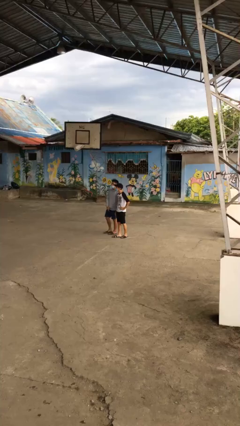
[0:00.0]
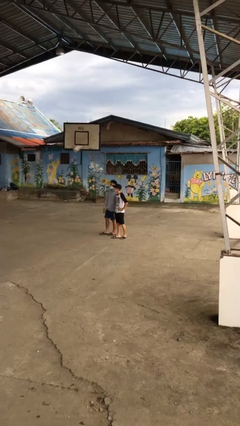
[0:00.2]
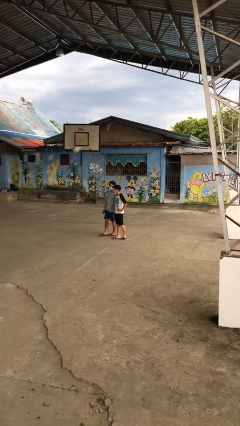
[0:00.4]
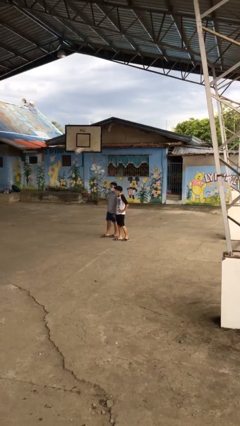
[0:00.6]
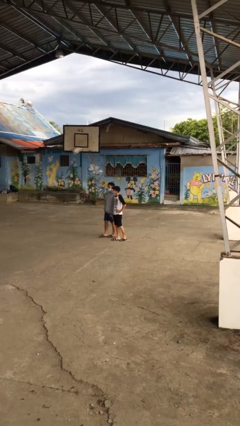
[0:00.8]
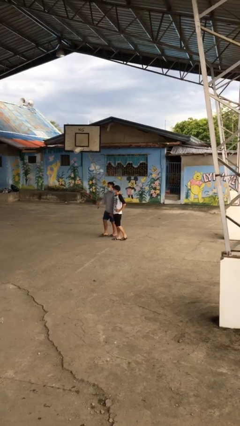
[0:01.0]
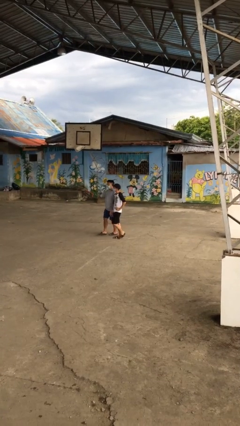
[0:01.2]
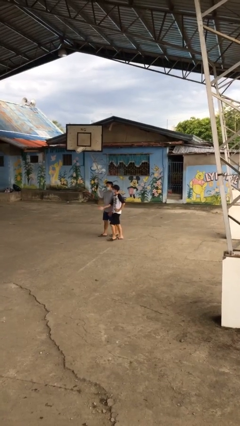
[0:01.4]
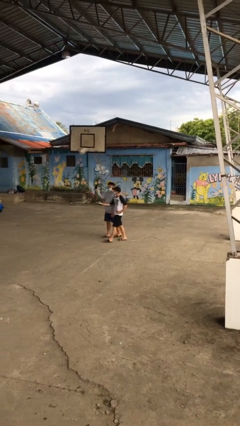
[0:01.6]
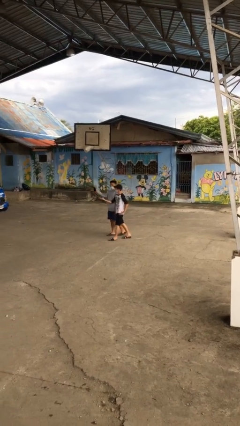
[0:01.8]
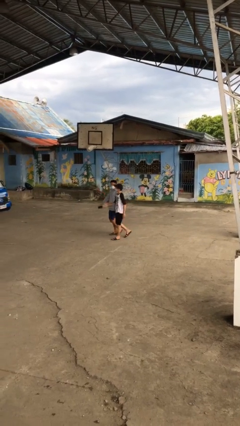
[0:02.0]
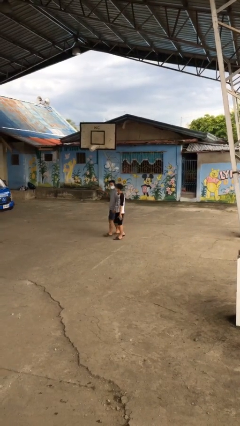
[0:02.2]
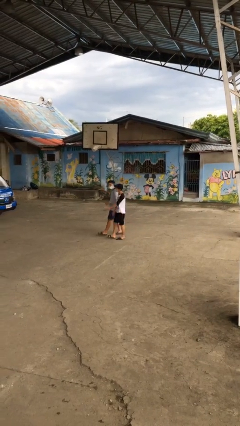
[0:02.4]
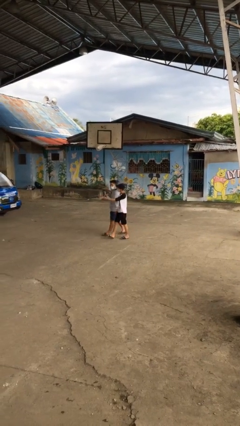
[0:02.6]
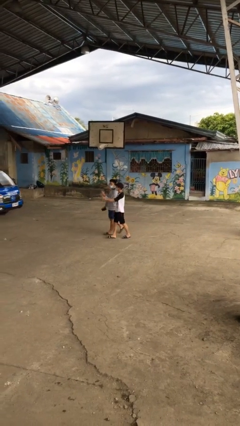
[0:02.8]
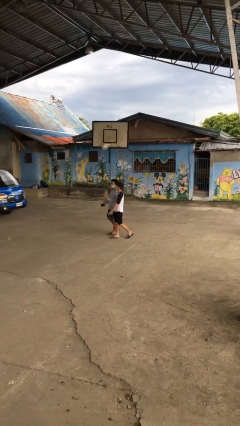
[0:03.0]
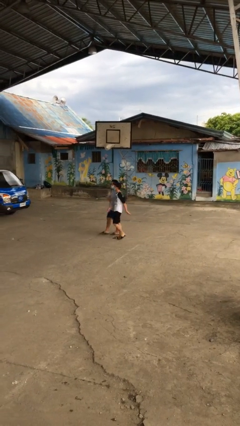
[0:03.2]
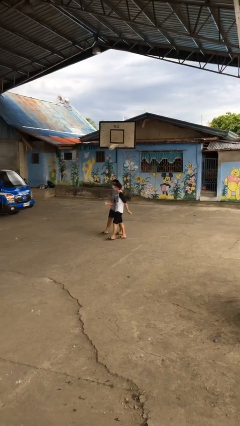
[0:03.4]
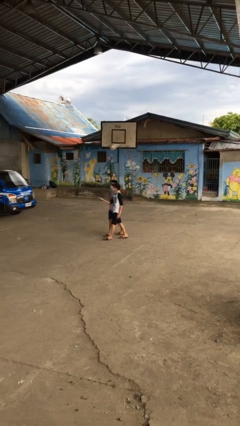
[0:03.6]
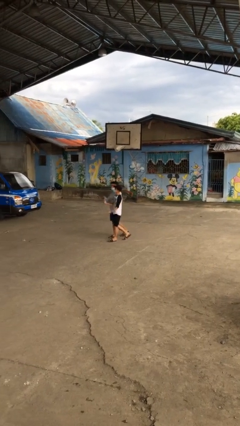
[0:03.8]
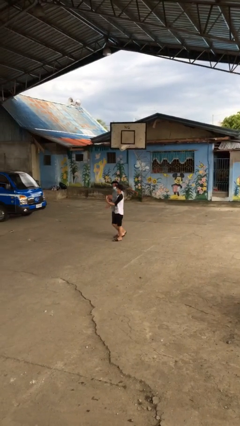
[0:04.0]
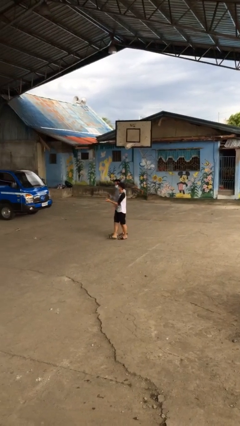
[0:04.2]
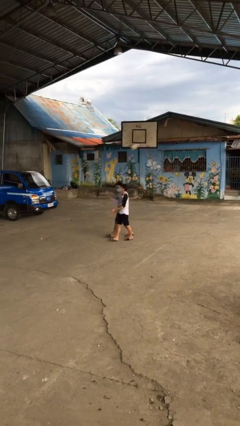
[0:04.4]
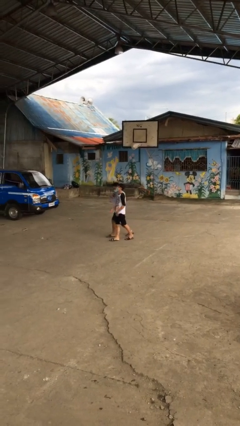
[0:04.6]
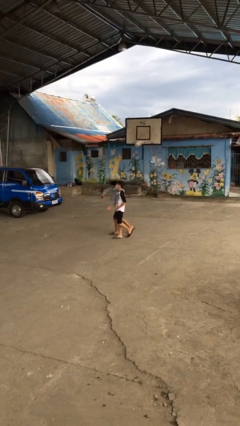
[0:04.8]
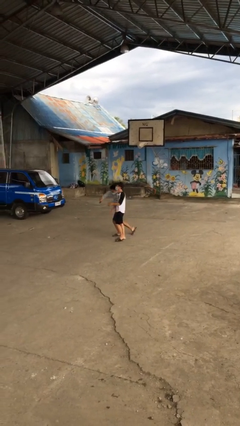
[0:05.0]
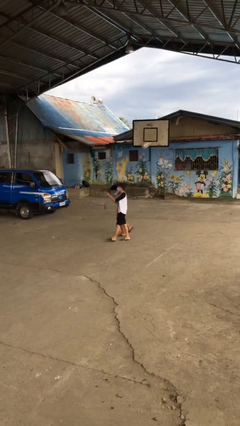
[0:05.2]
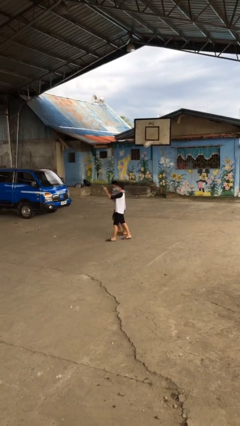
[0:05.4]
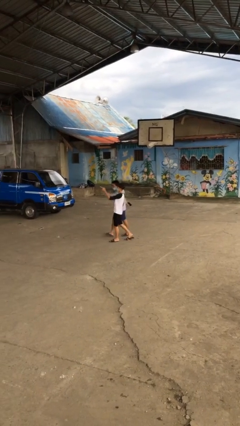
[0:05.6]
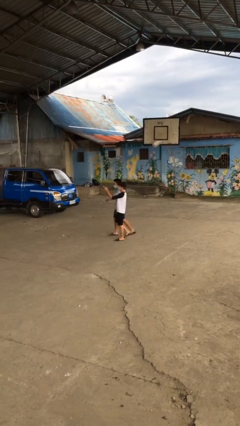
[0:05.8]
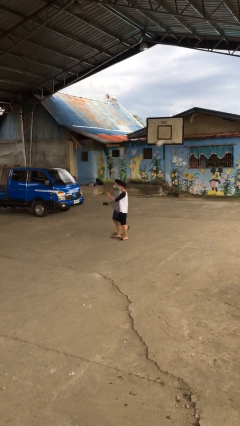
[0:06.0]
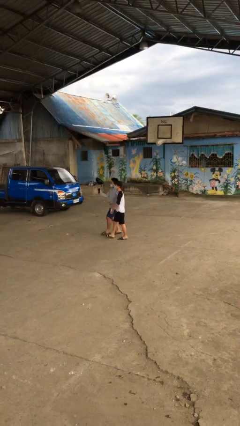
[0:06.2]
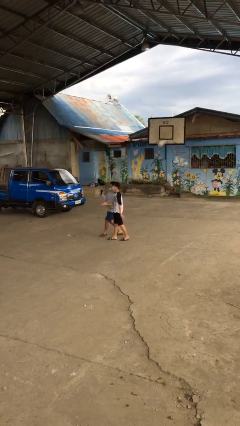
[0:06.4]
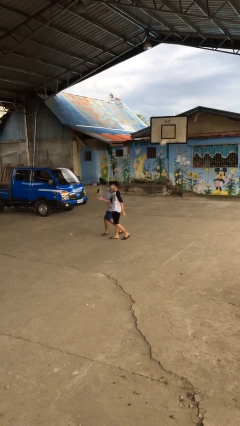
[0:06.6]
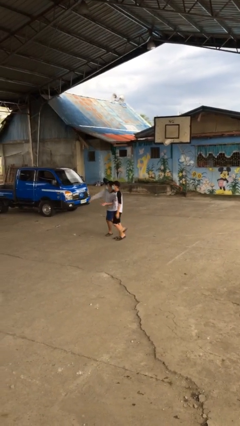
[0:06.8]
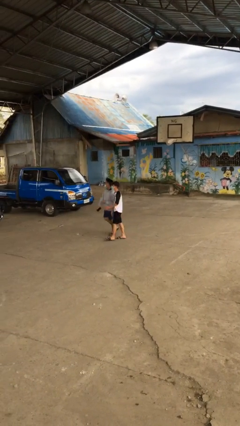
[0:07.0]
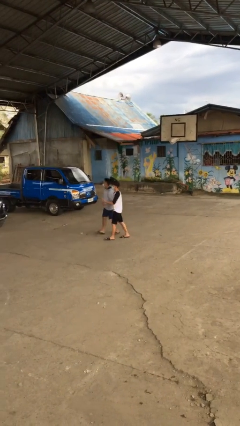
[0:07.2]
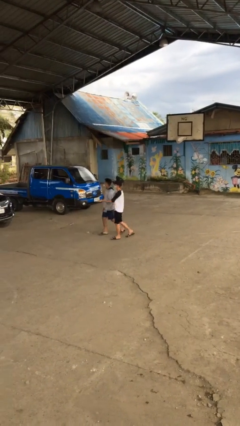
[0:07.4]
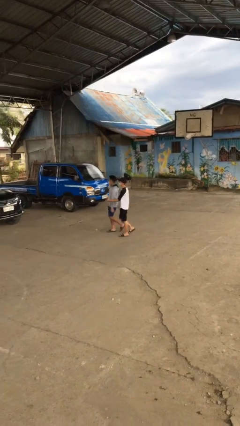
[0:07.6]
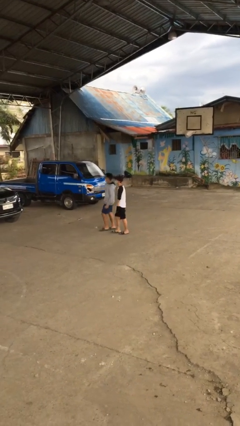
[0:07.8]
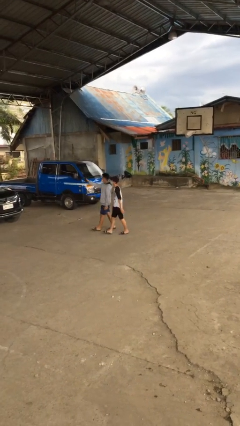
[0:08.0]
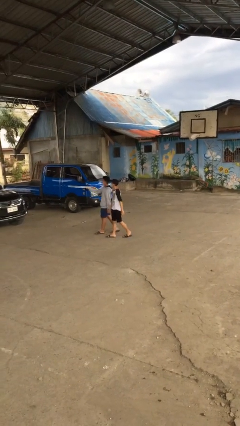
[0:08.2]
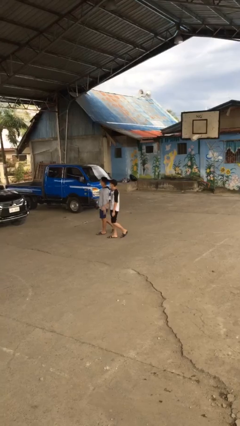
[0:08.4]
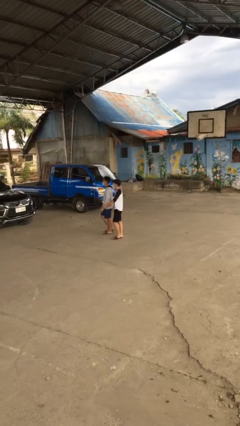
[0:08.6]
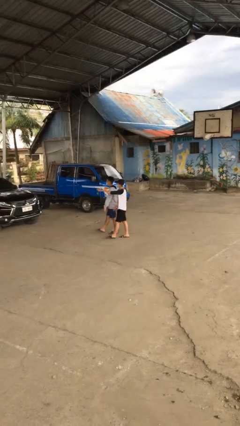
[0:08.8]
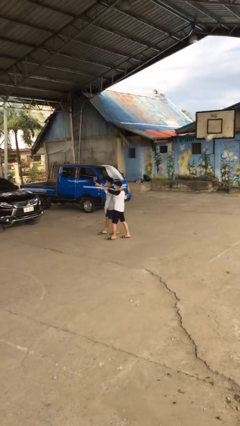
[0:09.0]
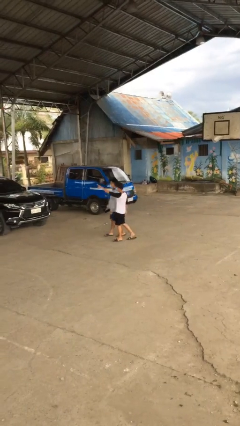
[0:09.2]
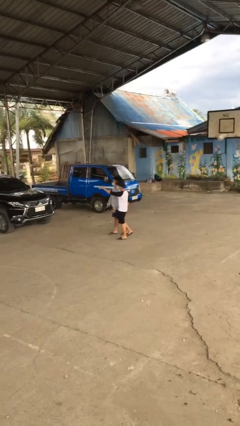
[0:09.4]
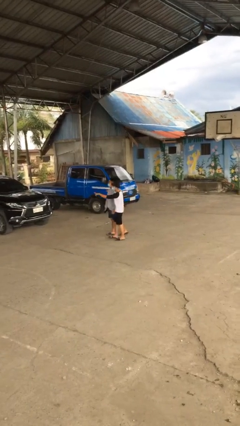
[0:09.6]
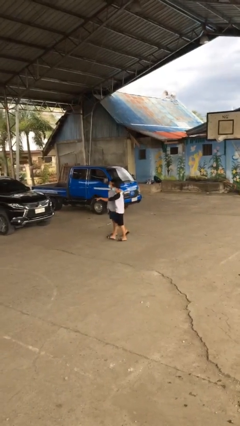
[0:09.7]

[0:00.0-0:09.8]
person talks to person

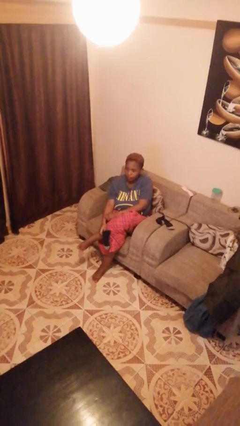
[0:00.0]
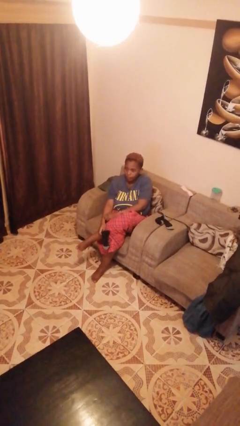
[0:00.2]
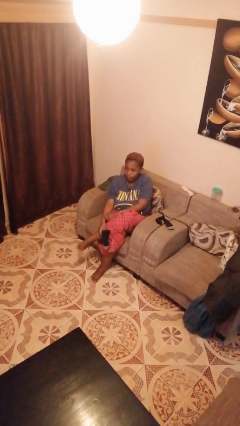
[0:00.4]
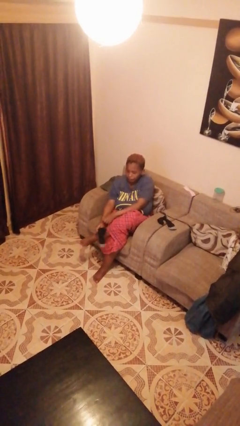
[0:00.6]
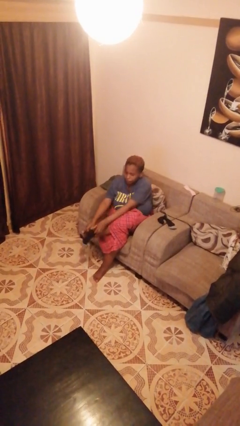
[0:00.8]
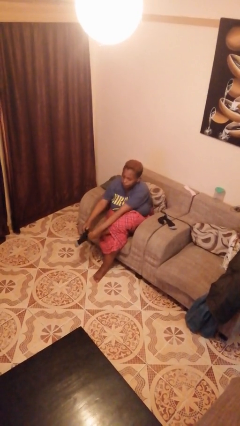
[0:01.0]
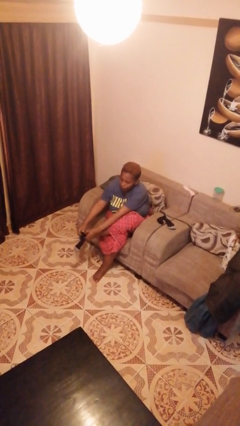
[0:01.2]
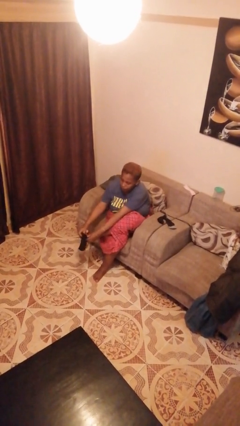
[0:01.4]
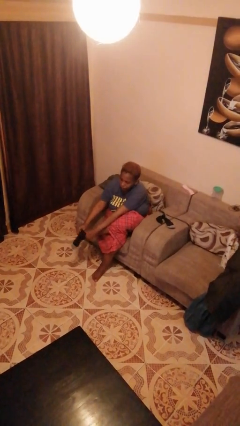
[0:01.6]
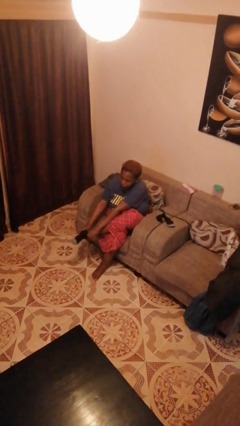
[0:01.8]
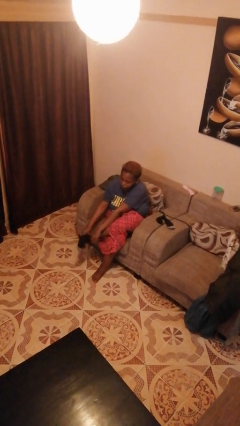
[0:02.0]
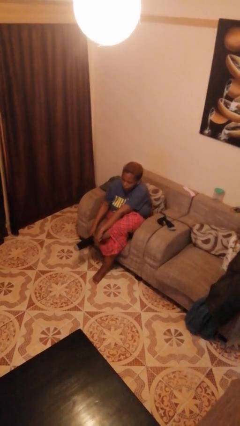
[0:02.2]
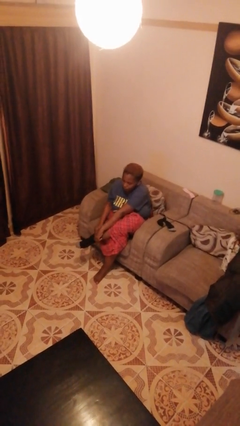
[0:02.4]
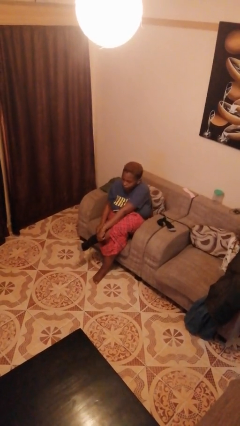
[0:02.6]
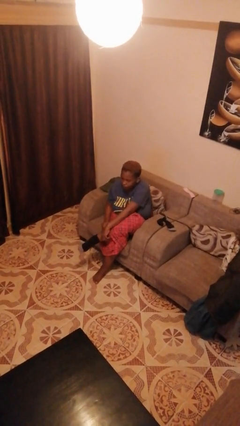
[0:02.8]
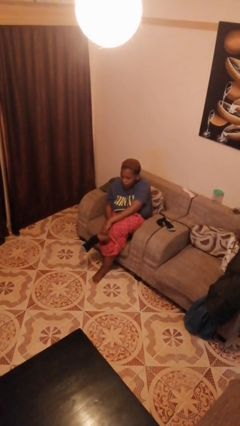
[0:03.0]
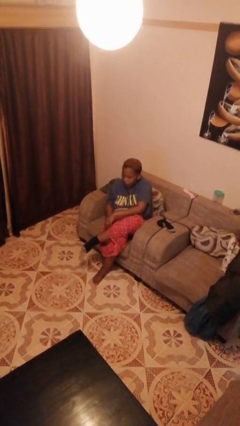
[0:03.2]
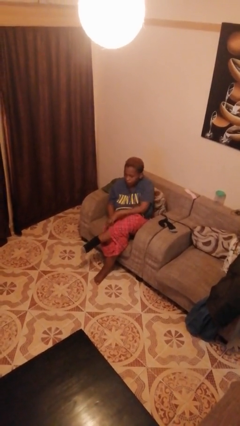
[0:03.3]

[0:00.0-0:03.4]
person puts on socks

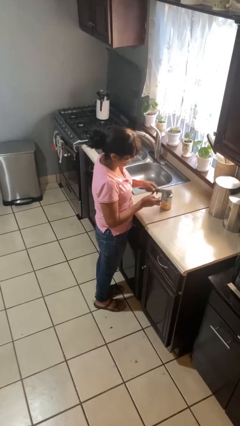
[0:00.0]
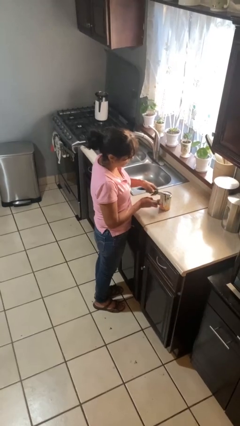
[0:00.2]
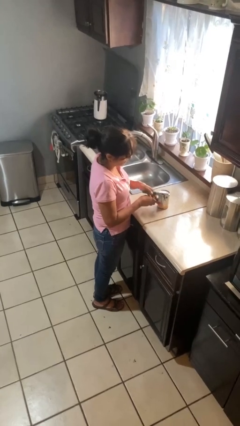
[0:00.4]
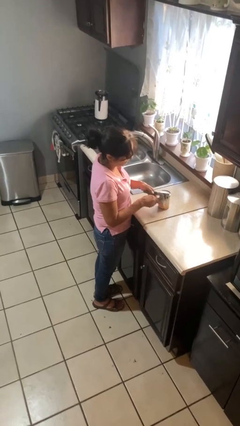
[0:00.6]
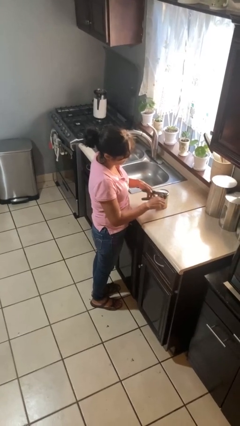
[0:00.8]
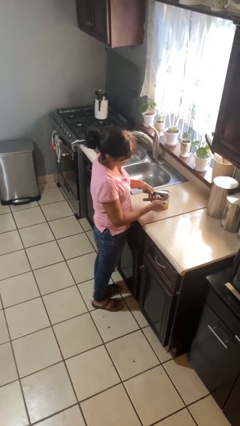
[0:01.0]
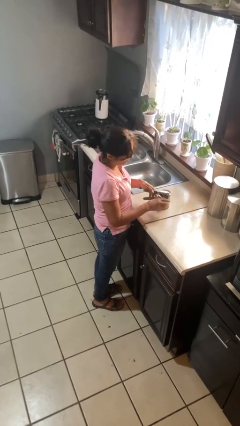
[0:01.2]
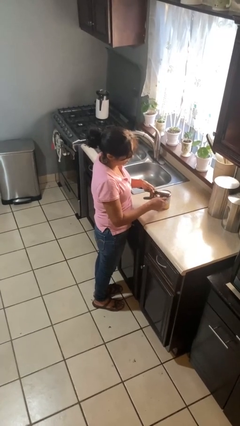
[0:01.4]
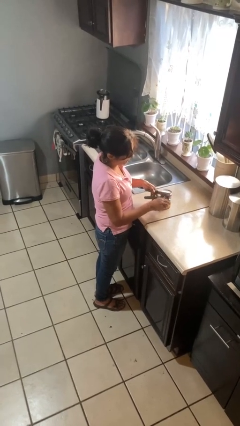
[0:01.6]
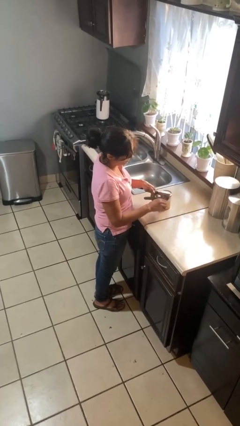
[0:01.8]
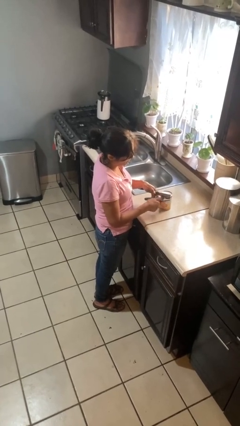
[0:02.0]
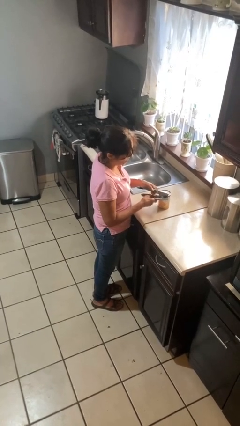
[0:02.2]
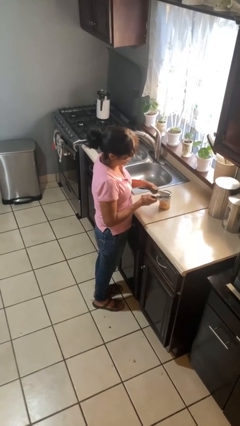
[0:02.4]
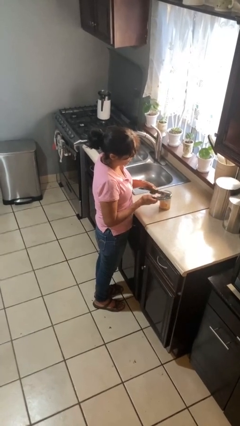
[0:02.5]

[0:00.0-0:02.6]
person opens can with can opener

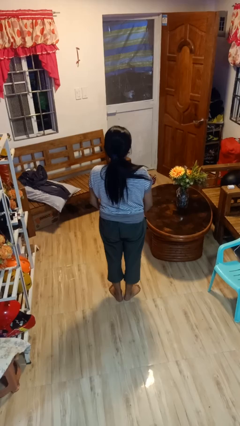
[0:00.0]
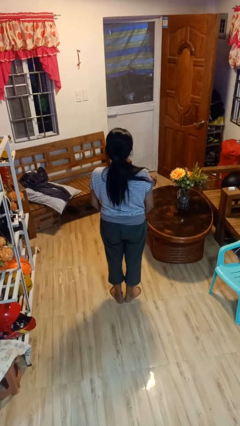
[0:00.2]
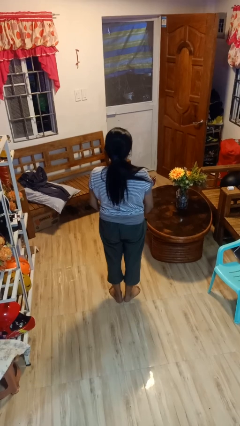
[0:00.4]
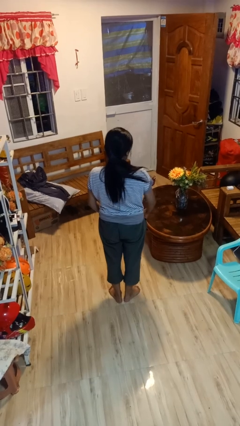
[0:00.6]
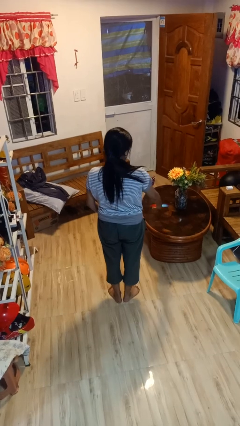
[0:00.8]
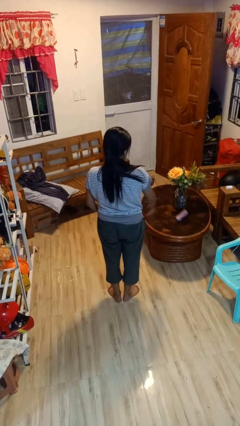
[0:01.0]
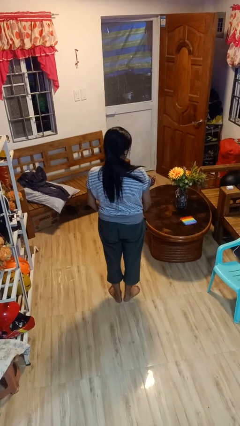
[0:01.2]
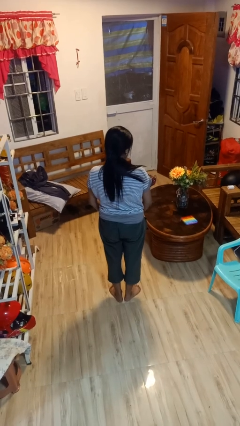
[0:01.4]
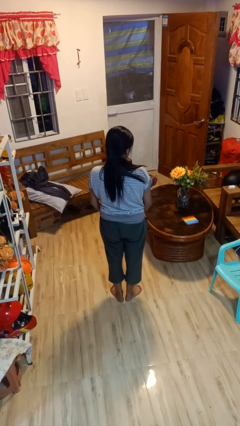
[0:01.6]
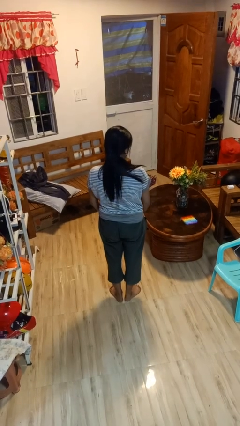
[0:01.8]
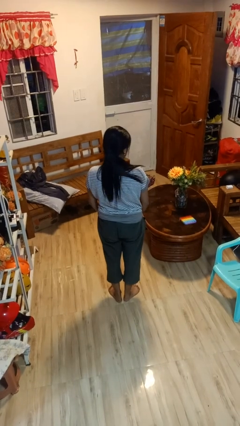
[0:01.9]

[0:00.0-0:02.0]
person throws object on table

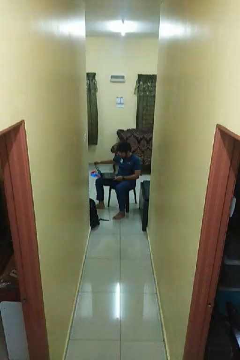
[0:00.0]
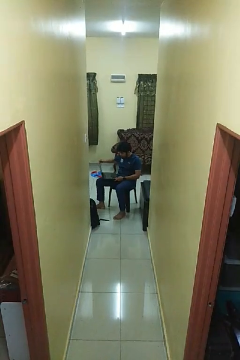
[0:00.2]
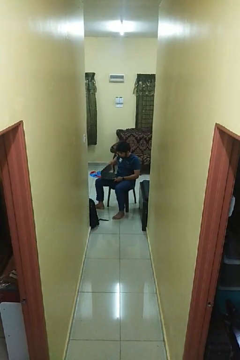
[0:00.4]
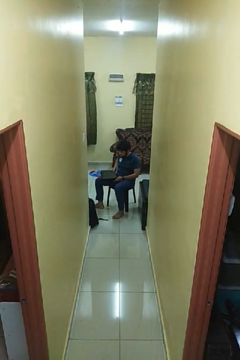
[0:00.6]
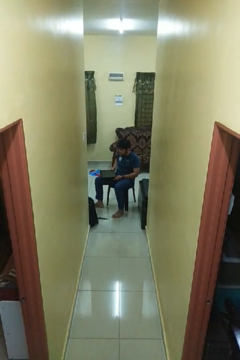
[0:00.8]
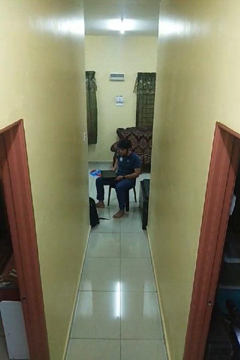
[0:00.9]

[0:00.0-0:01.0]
person closes laptop
